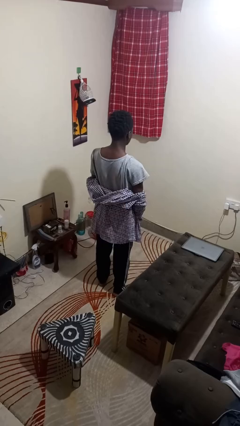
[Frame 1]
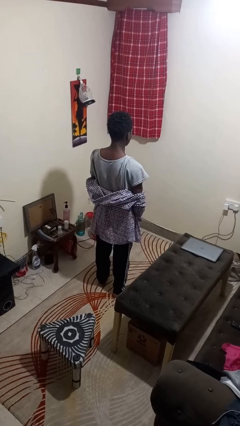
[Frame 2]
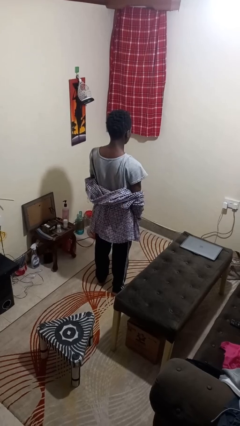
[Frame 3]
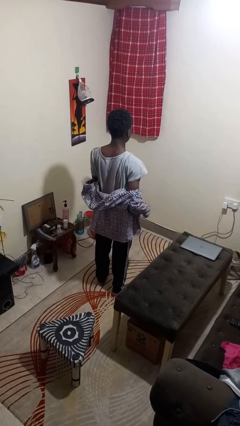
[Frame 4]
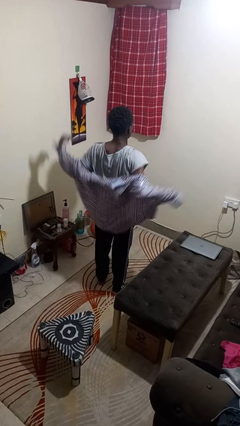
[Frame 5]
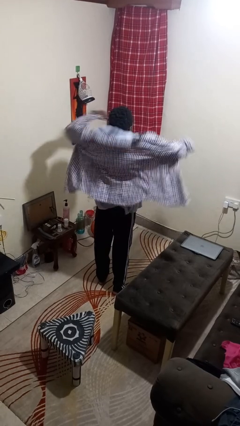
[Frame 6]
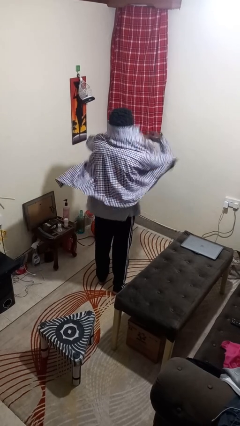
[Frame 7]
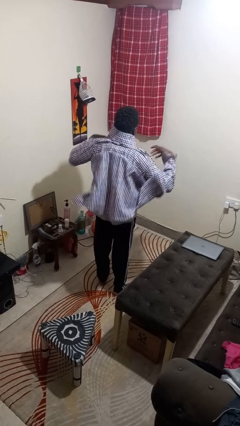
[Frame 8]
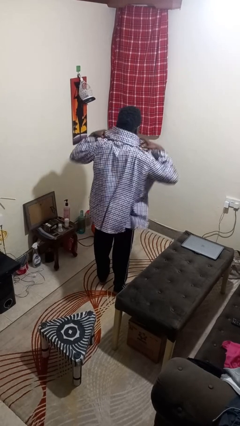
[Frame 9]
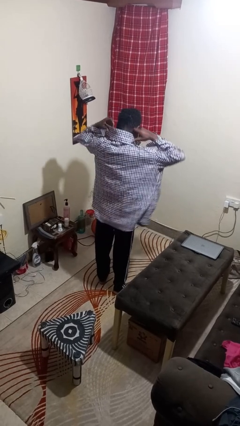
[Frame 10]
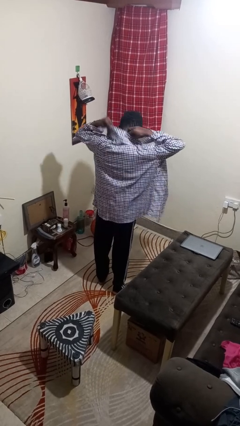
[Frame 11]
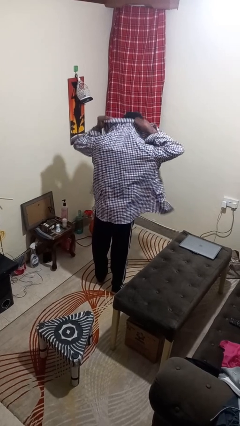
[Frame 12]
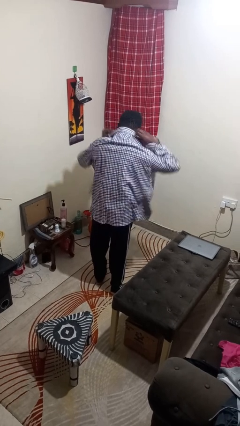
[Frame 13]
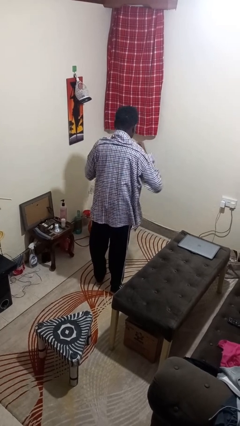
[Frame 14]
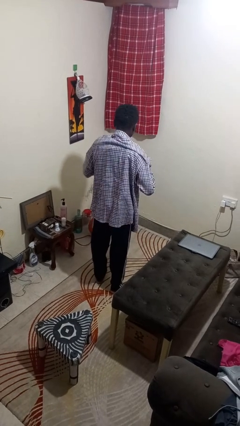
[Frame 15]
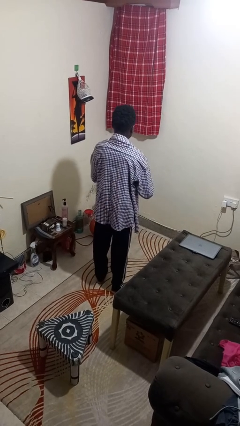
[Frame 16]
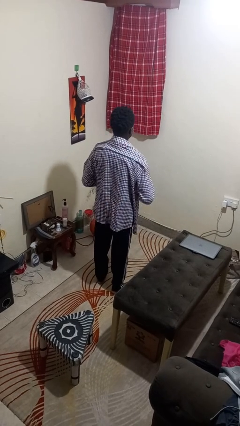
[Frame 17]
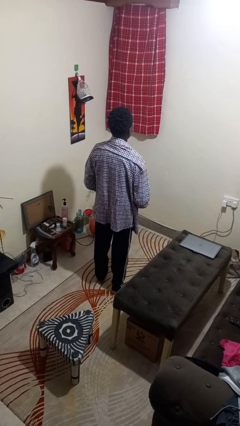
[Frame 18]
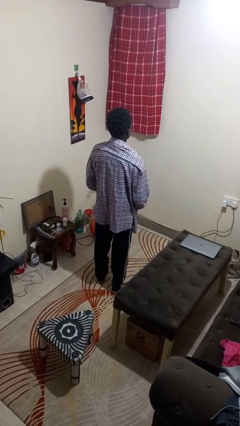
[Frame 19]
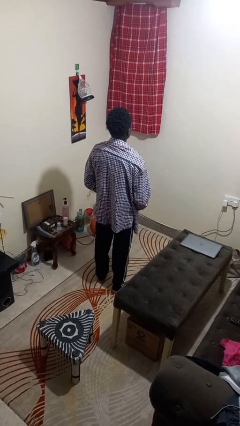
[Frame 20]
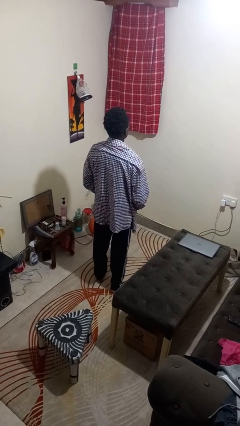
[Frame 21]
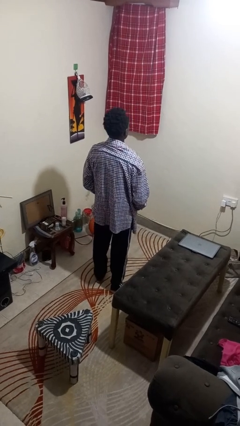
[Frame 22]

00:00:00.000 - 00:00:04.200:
person puts on shirt

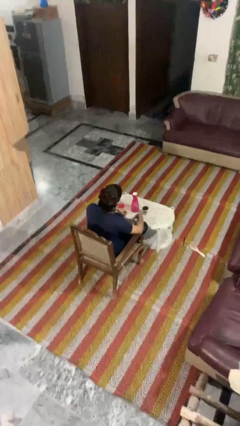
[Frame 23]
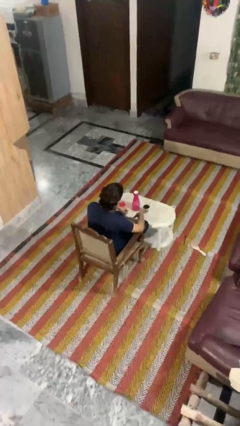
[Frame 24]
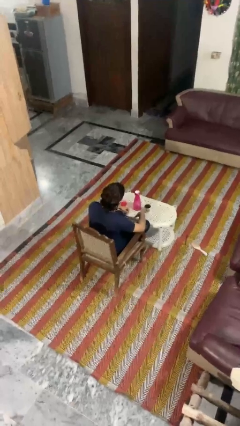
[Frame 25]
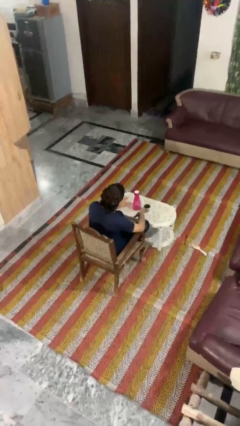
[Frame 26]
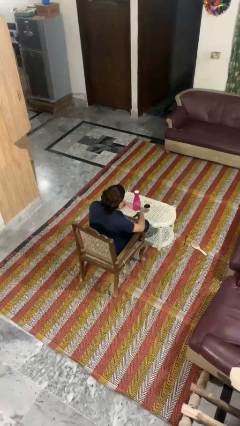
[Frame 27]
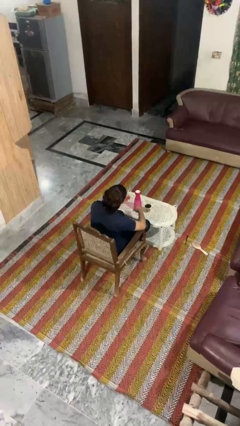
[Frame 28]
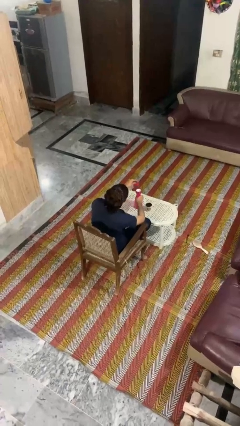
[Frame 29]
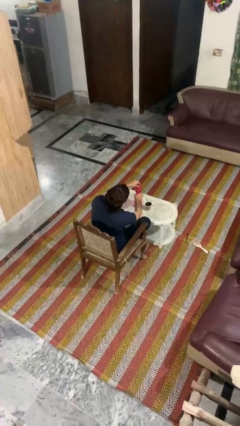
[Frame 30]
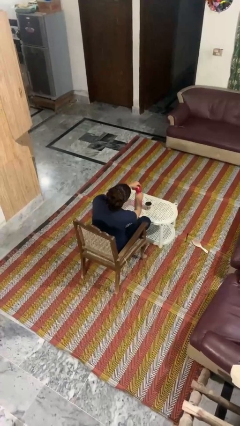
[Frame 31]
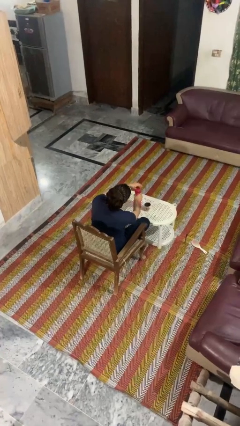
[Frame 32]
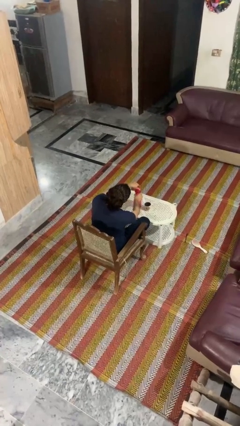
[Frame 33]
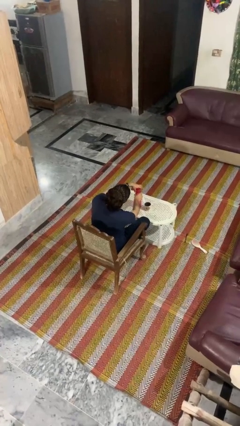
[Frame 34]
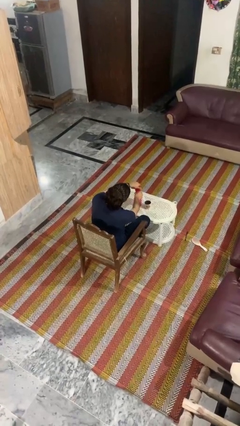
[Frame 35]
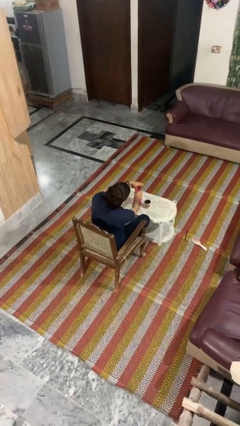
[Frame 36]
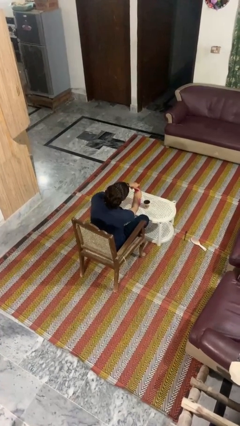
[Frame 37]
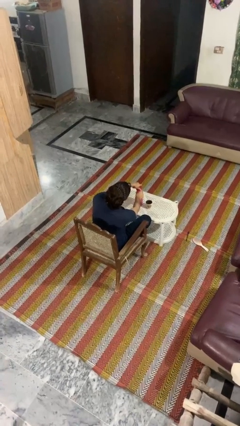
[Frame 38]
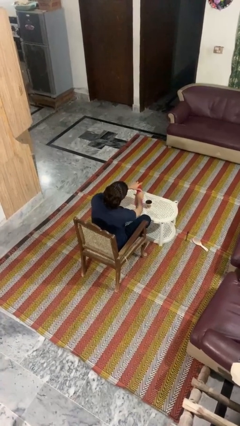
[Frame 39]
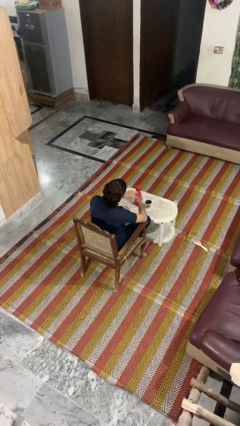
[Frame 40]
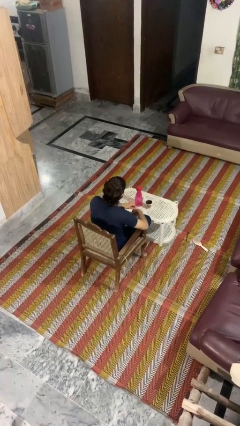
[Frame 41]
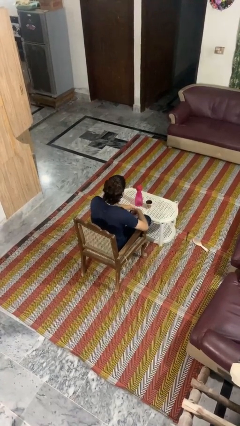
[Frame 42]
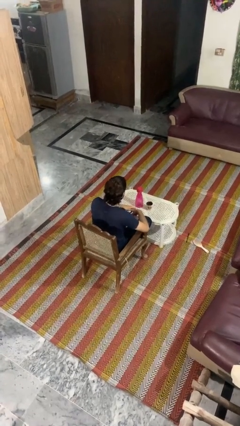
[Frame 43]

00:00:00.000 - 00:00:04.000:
person screws lid to bottle

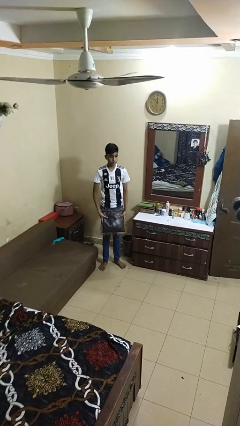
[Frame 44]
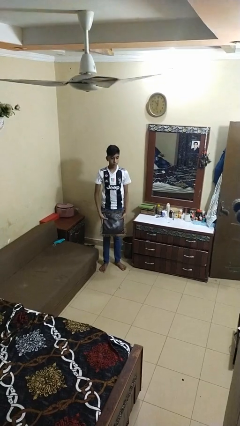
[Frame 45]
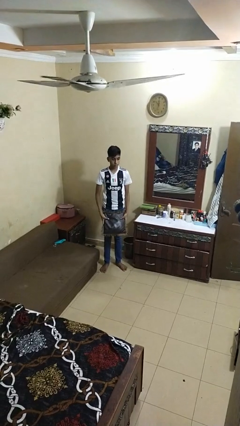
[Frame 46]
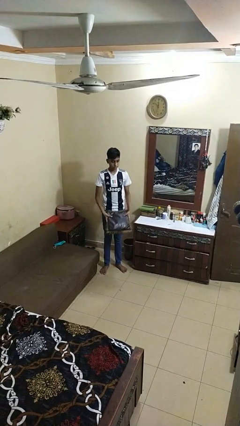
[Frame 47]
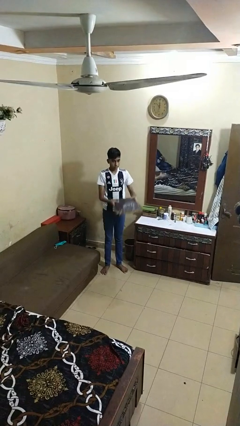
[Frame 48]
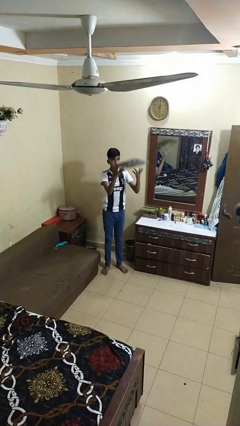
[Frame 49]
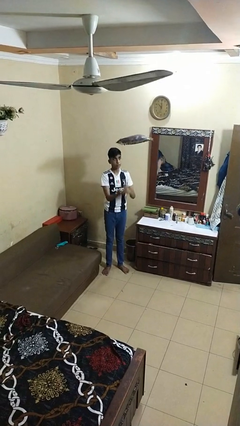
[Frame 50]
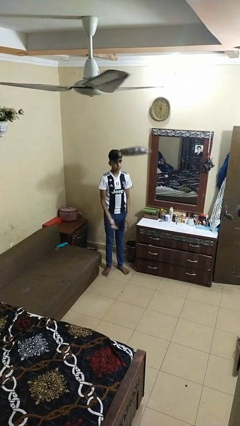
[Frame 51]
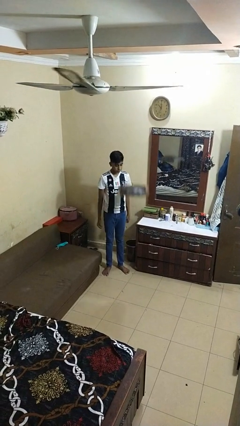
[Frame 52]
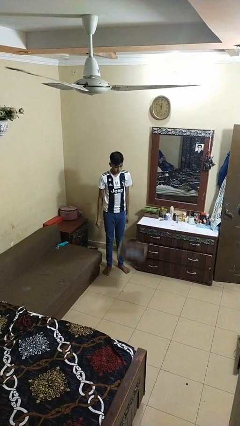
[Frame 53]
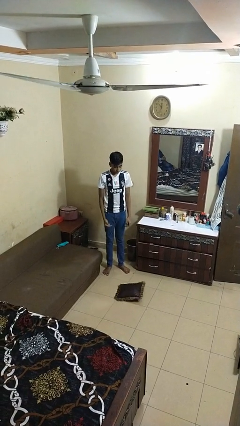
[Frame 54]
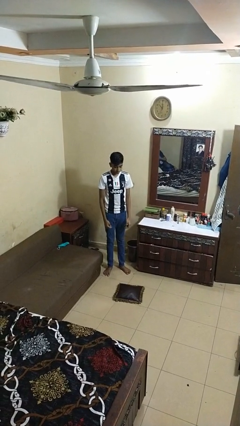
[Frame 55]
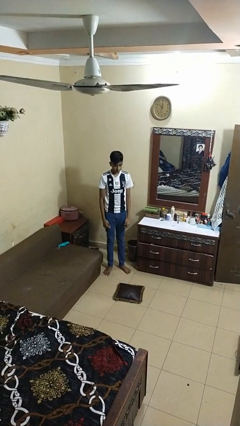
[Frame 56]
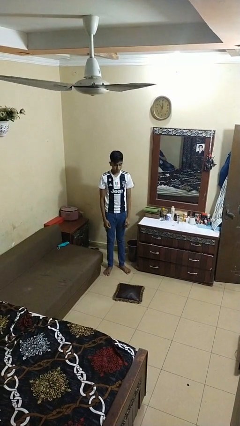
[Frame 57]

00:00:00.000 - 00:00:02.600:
person throws object into air

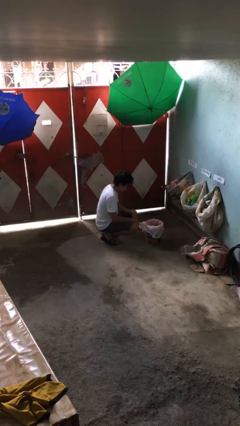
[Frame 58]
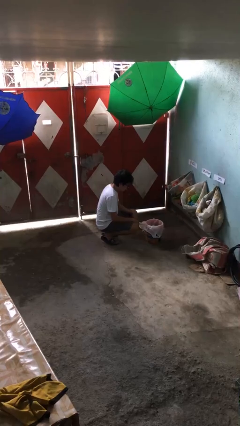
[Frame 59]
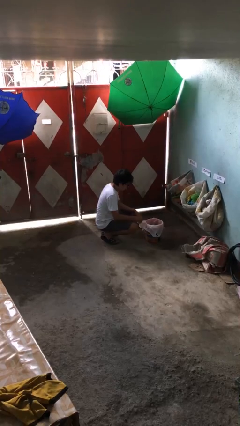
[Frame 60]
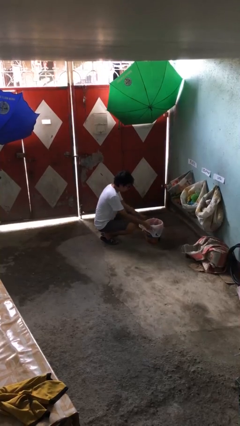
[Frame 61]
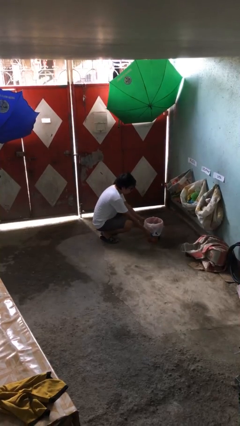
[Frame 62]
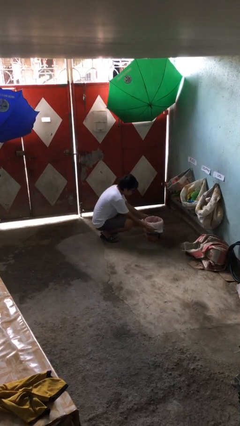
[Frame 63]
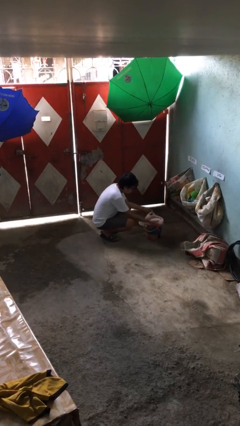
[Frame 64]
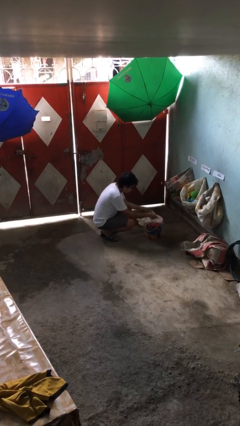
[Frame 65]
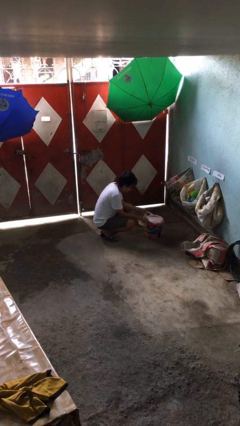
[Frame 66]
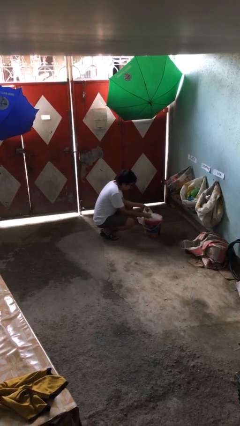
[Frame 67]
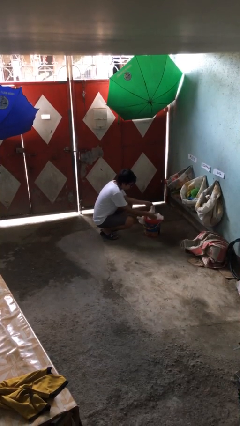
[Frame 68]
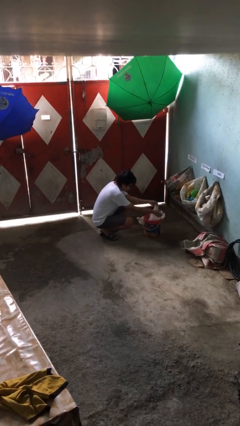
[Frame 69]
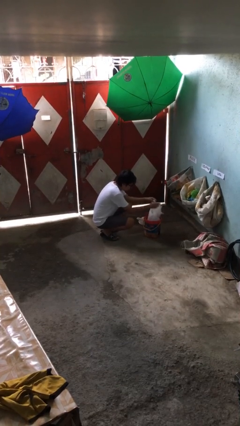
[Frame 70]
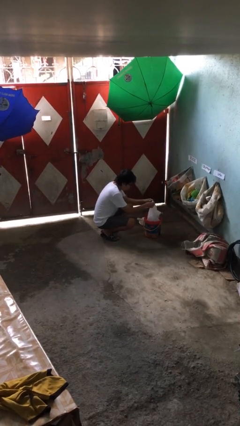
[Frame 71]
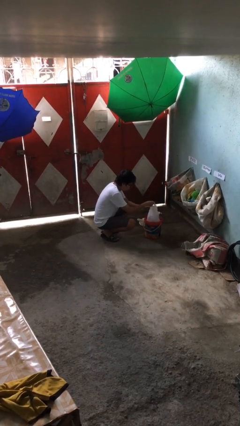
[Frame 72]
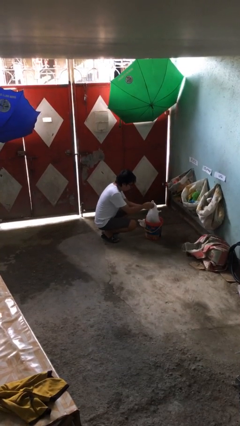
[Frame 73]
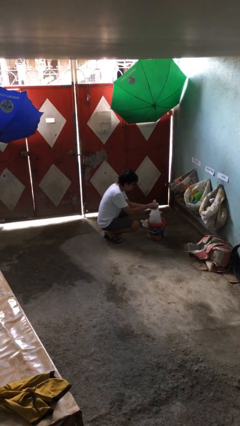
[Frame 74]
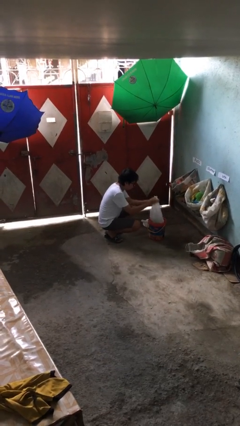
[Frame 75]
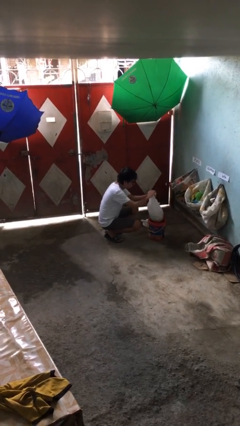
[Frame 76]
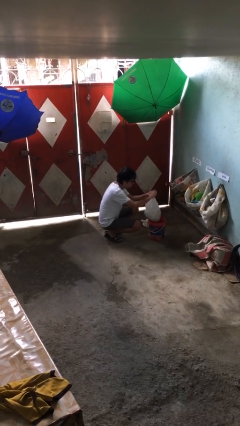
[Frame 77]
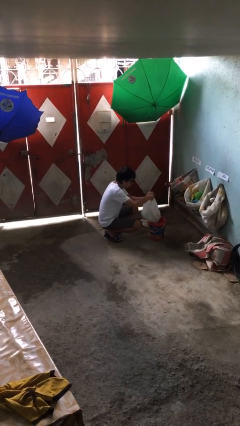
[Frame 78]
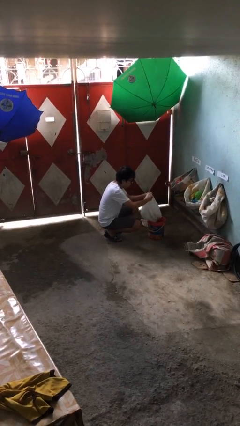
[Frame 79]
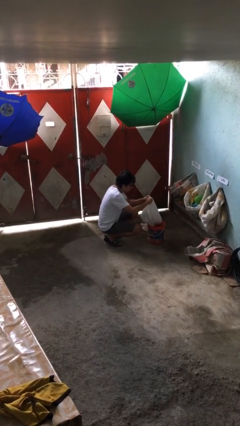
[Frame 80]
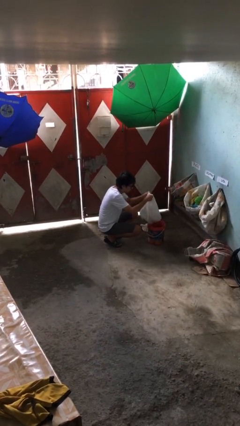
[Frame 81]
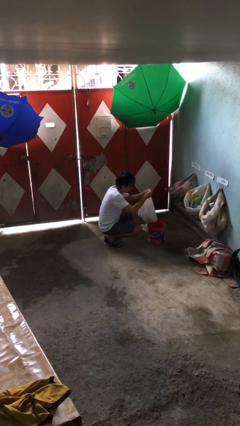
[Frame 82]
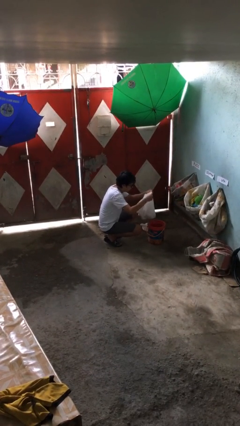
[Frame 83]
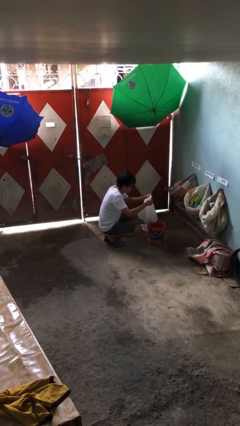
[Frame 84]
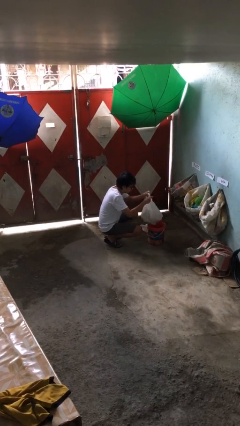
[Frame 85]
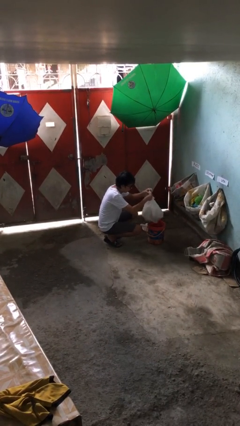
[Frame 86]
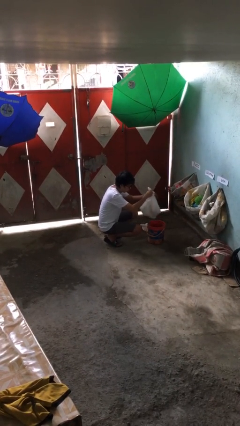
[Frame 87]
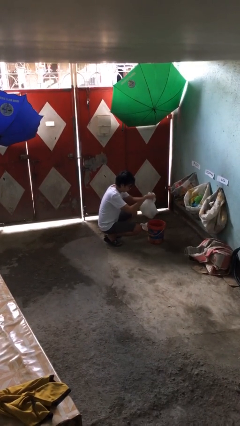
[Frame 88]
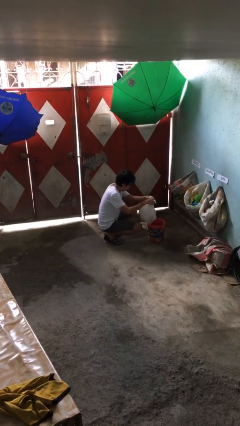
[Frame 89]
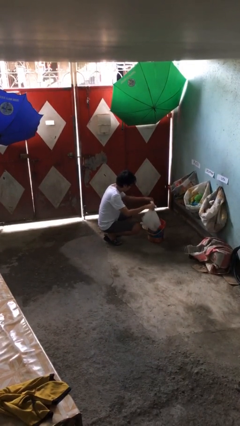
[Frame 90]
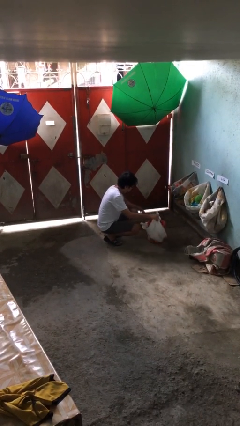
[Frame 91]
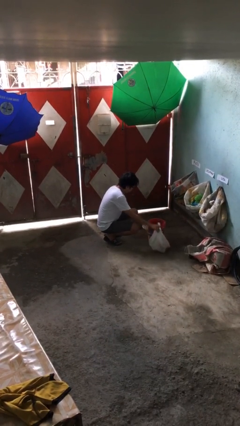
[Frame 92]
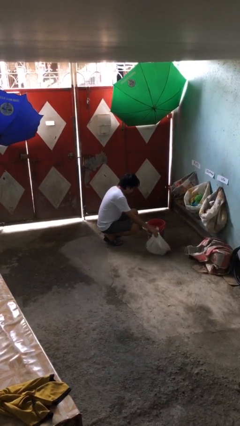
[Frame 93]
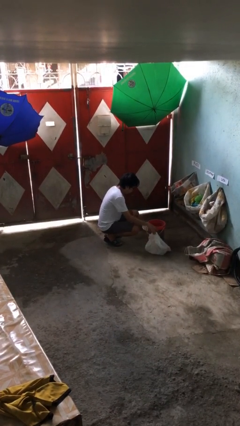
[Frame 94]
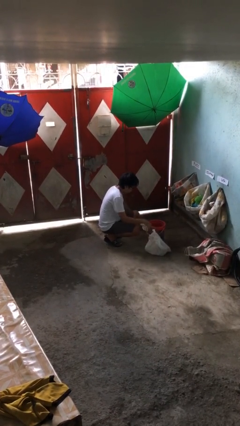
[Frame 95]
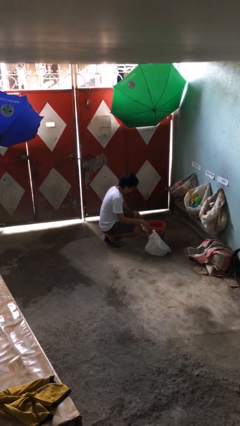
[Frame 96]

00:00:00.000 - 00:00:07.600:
person removes trashbag from trashcan
